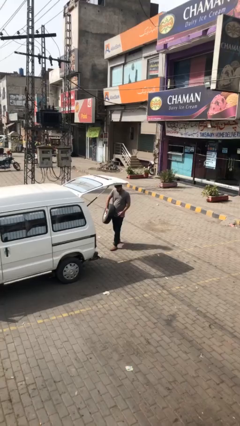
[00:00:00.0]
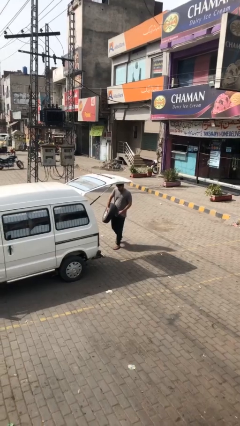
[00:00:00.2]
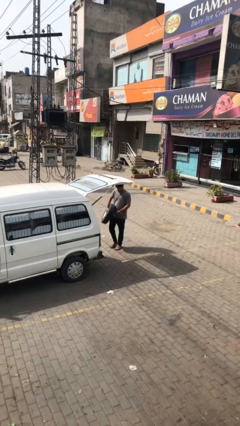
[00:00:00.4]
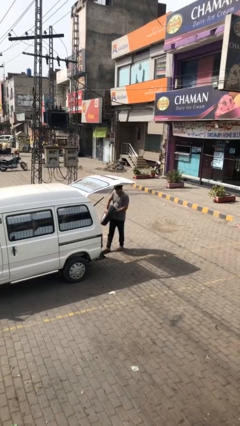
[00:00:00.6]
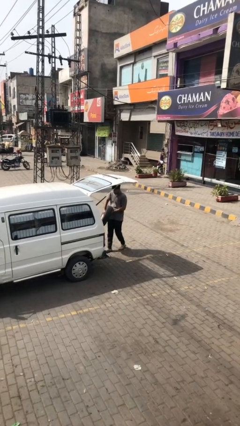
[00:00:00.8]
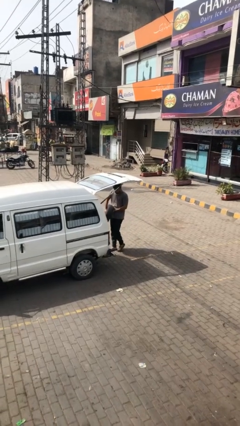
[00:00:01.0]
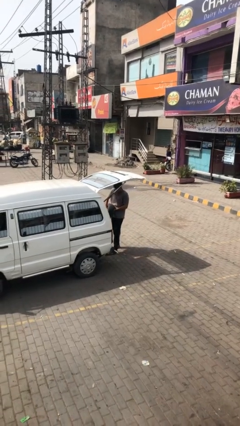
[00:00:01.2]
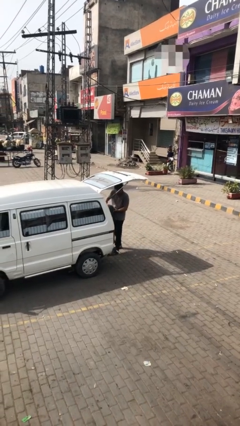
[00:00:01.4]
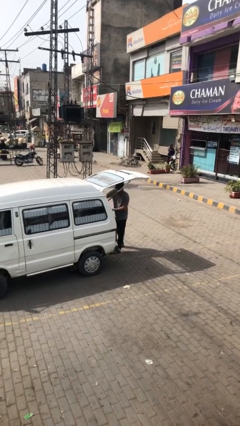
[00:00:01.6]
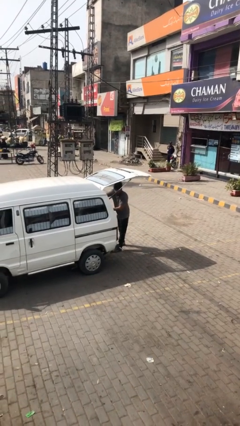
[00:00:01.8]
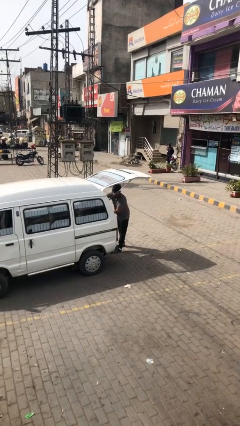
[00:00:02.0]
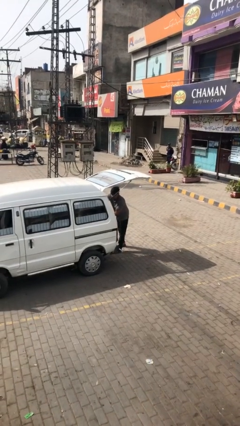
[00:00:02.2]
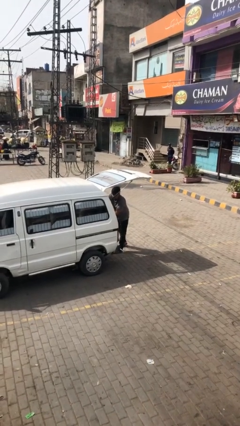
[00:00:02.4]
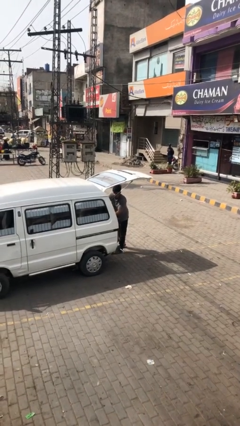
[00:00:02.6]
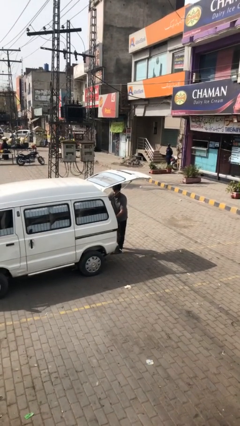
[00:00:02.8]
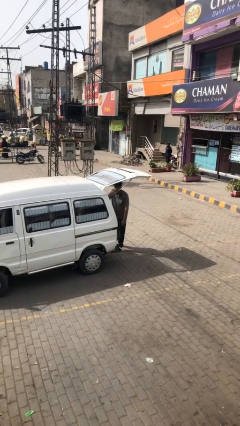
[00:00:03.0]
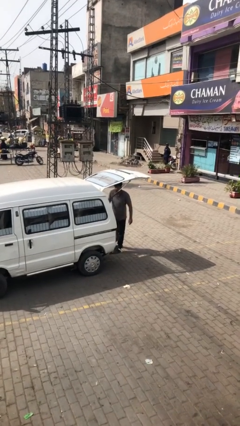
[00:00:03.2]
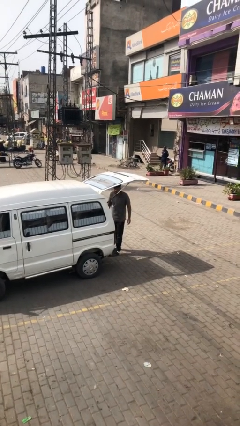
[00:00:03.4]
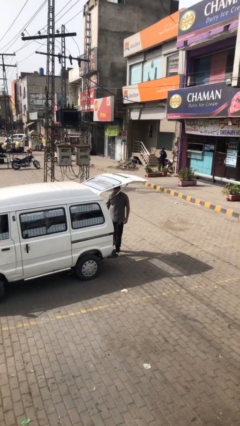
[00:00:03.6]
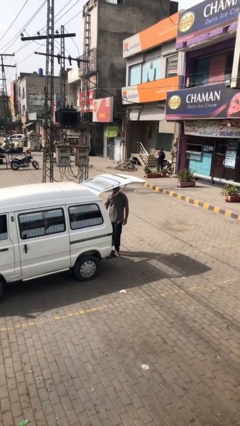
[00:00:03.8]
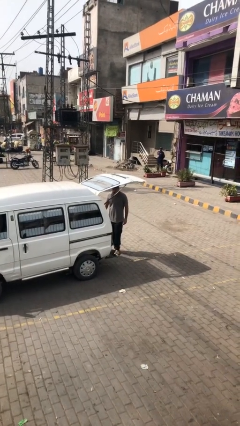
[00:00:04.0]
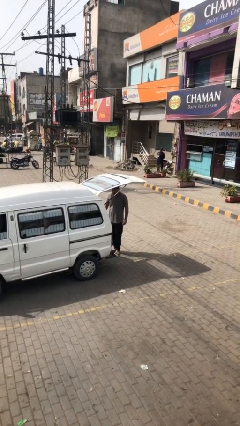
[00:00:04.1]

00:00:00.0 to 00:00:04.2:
person loads car

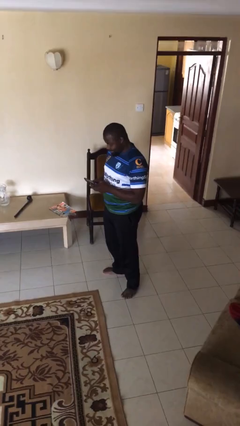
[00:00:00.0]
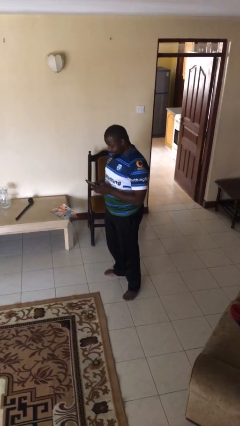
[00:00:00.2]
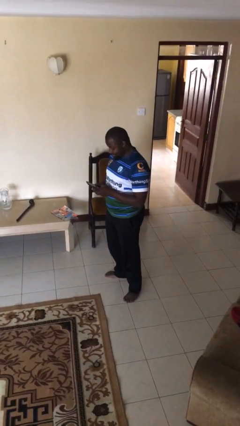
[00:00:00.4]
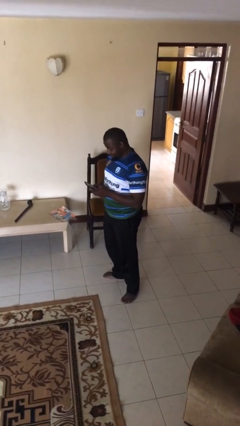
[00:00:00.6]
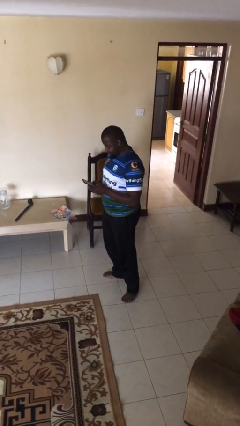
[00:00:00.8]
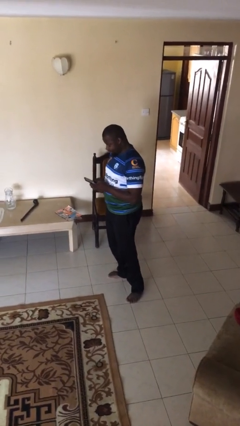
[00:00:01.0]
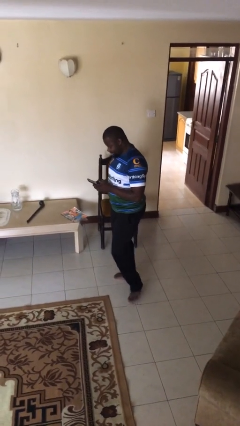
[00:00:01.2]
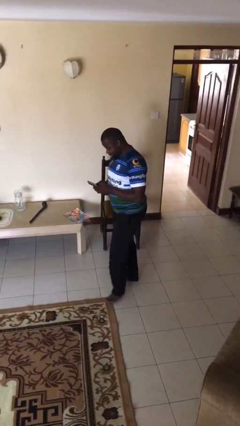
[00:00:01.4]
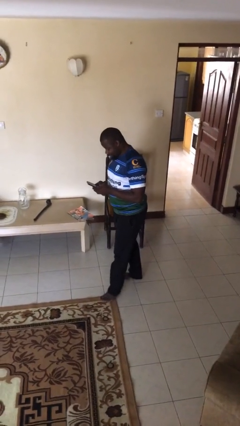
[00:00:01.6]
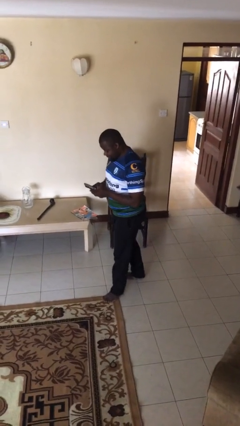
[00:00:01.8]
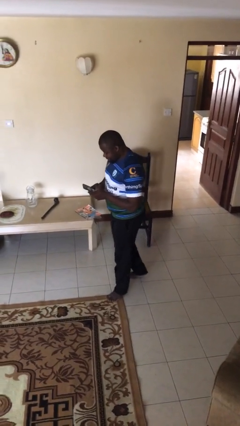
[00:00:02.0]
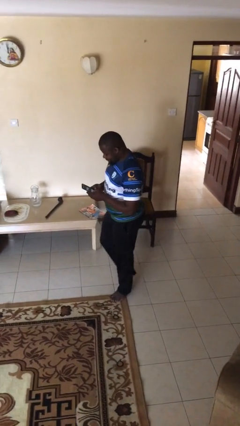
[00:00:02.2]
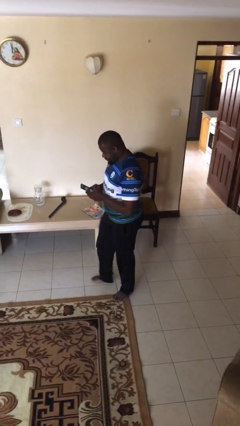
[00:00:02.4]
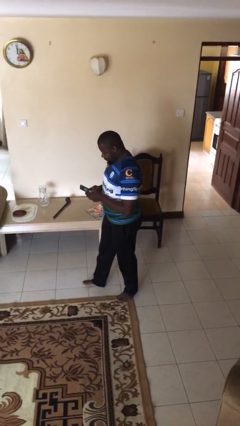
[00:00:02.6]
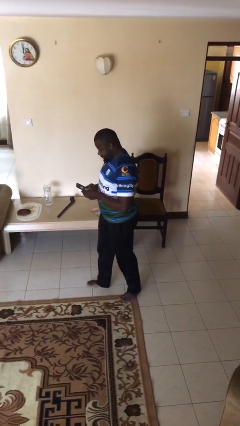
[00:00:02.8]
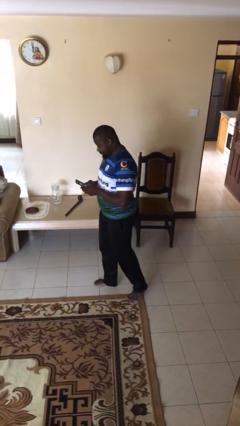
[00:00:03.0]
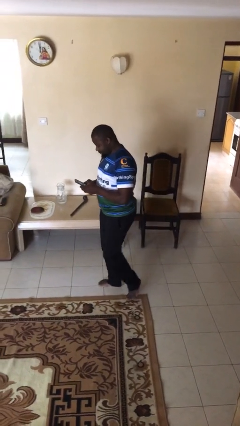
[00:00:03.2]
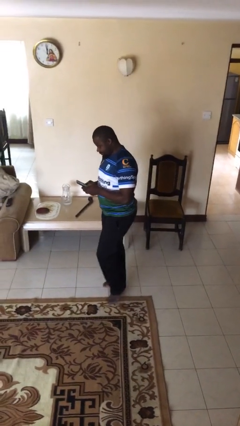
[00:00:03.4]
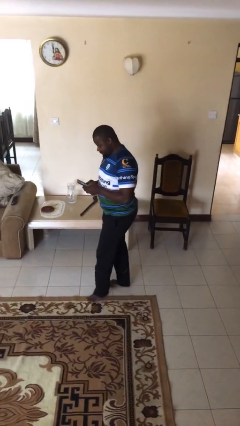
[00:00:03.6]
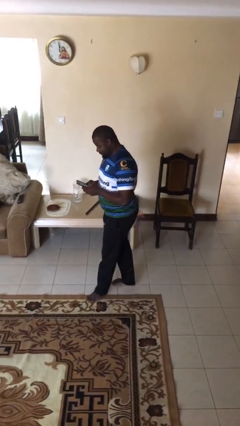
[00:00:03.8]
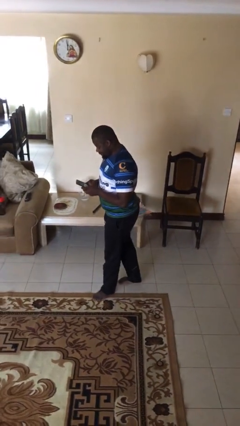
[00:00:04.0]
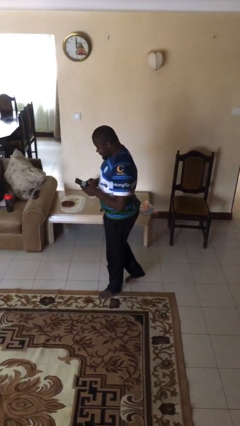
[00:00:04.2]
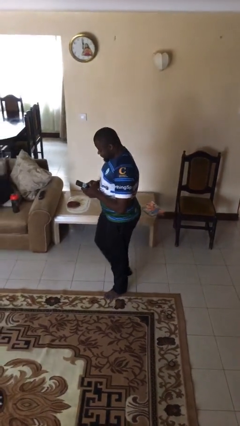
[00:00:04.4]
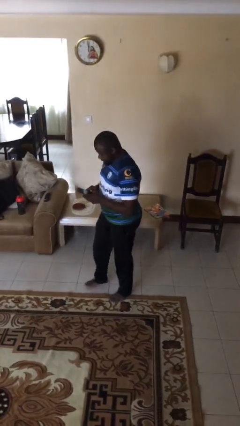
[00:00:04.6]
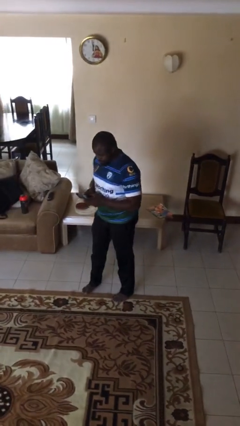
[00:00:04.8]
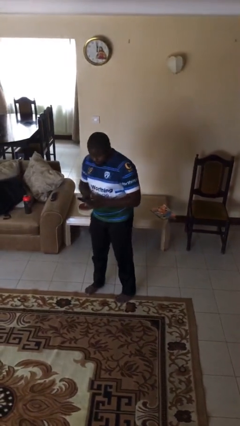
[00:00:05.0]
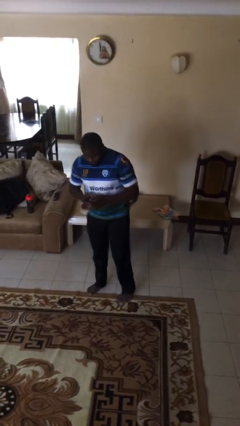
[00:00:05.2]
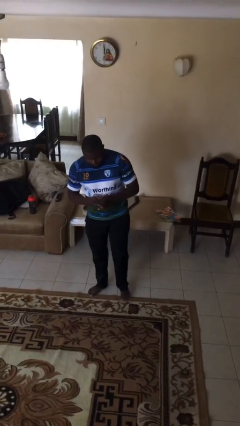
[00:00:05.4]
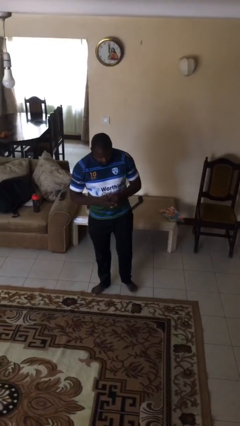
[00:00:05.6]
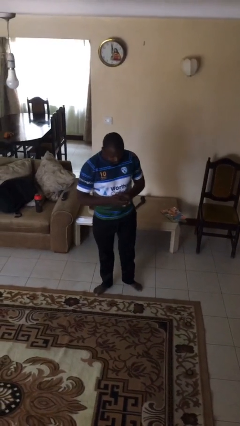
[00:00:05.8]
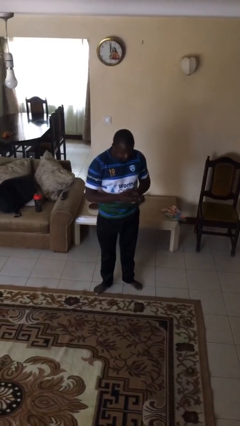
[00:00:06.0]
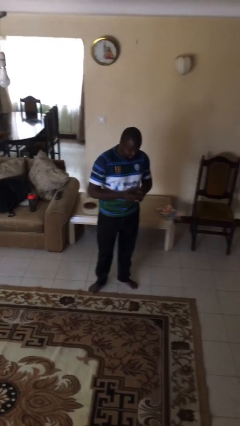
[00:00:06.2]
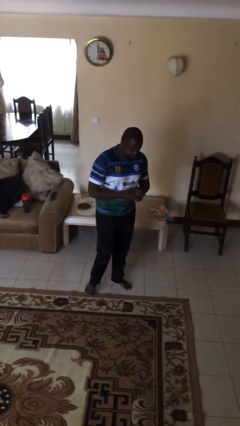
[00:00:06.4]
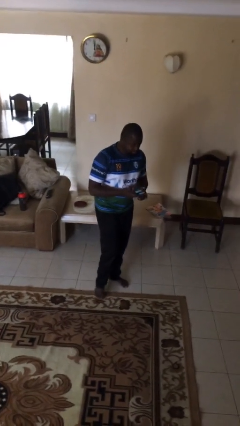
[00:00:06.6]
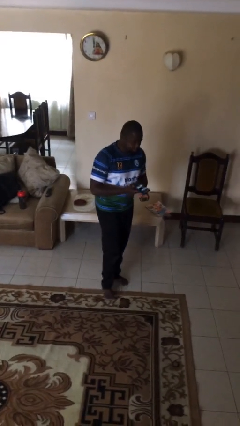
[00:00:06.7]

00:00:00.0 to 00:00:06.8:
person texts on phone

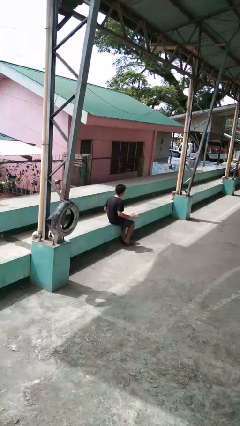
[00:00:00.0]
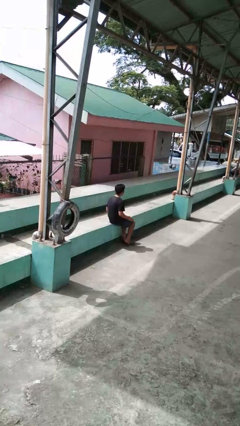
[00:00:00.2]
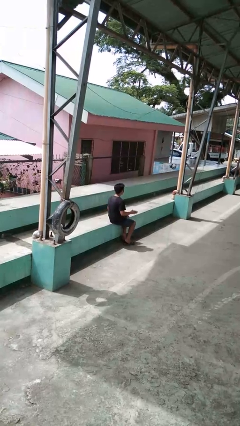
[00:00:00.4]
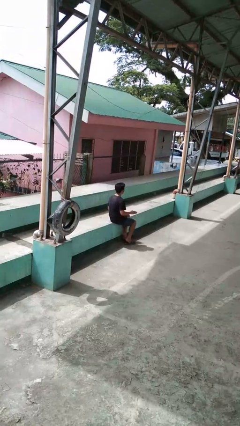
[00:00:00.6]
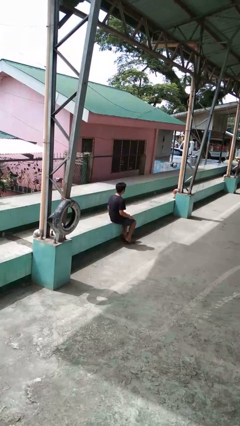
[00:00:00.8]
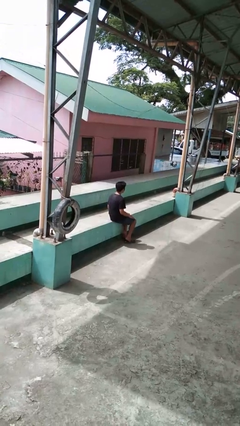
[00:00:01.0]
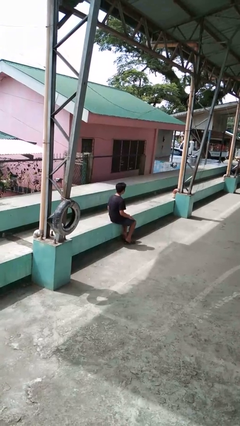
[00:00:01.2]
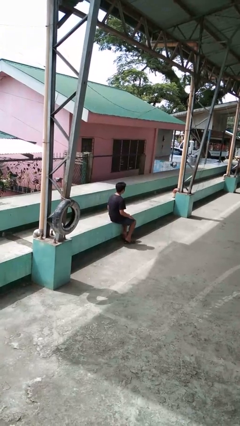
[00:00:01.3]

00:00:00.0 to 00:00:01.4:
person slaps hands on thighs

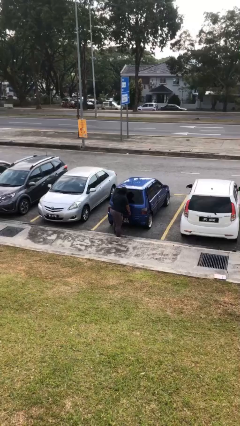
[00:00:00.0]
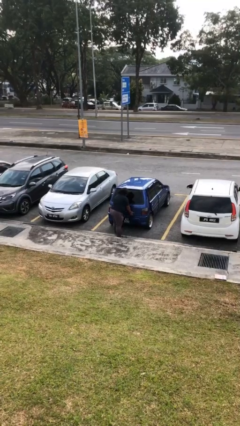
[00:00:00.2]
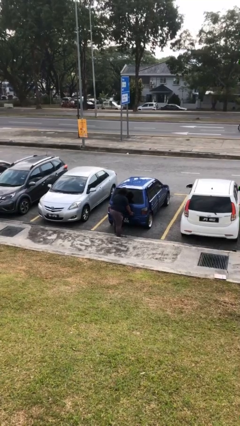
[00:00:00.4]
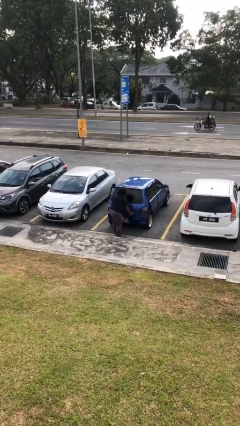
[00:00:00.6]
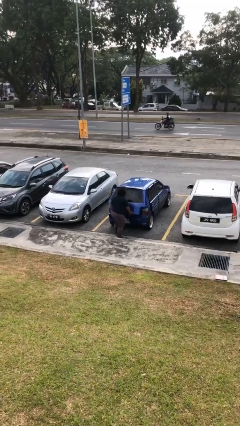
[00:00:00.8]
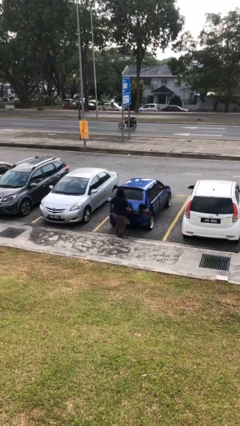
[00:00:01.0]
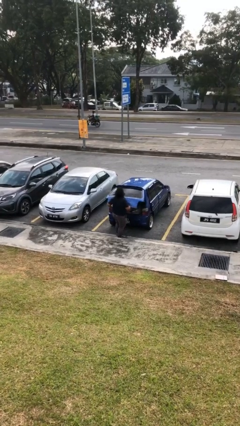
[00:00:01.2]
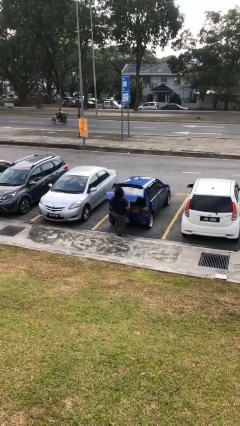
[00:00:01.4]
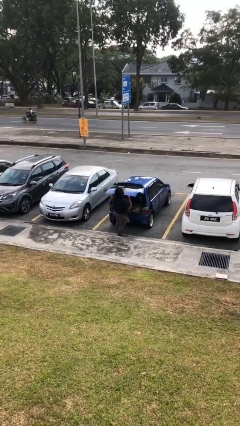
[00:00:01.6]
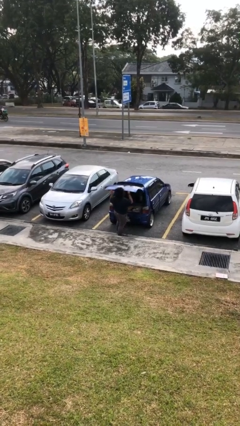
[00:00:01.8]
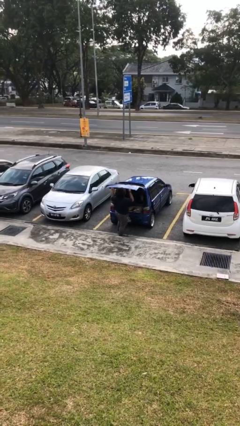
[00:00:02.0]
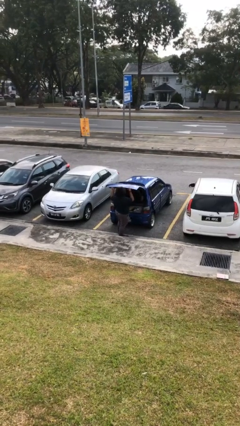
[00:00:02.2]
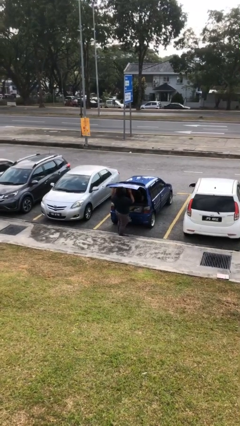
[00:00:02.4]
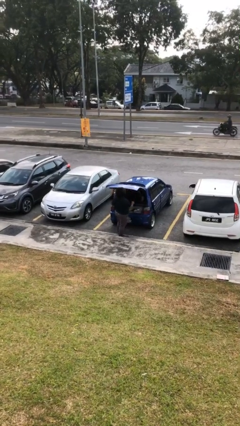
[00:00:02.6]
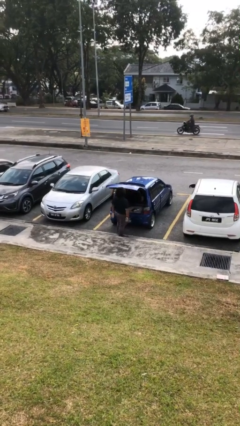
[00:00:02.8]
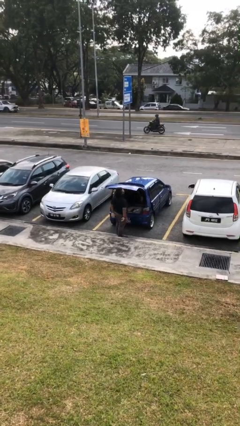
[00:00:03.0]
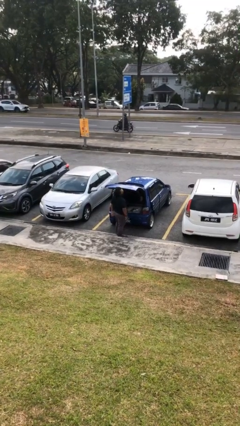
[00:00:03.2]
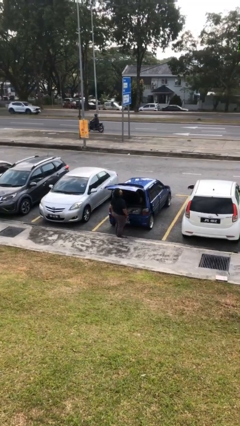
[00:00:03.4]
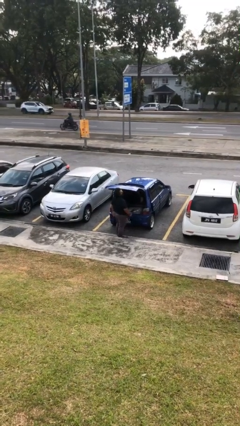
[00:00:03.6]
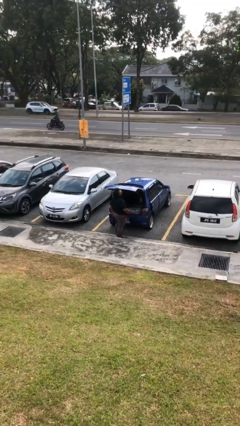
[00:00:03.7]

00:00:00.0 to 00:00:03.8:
person opens car trunk

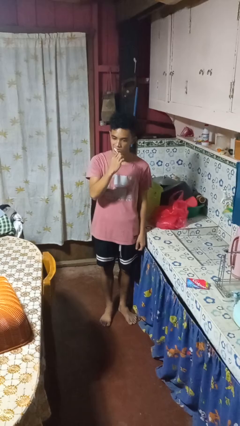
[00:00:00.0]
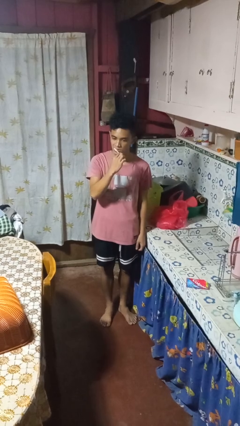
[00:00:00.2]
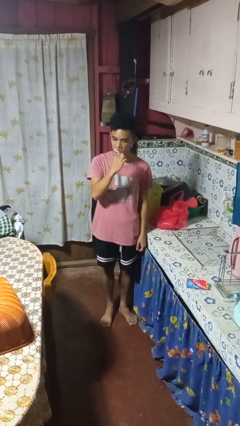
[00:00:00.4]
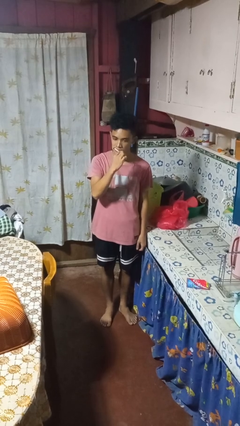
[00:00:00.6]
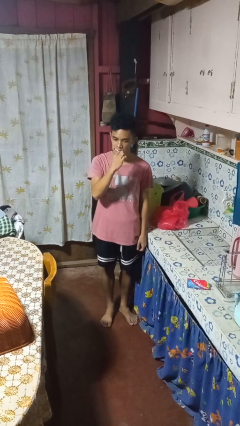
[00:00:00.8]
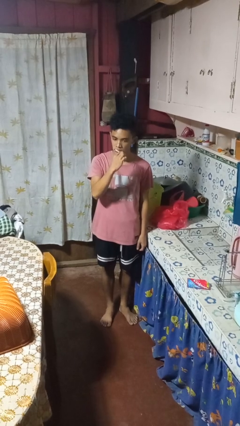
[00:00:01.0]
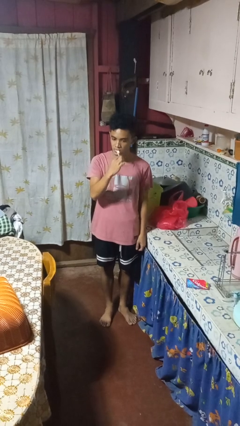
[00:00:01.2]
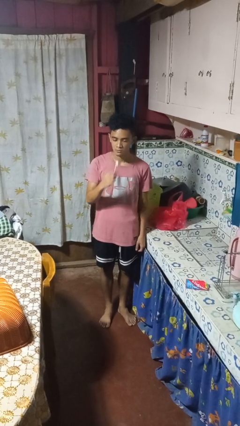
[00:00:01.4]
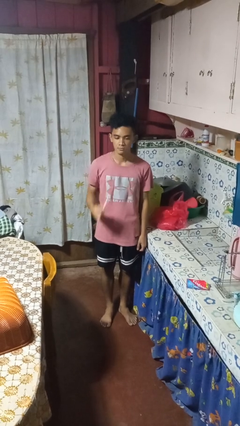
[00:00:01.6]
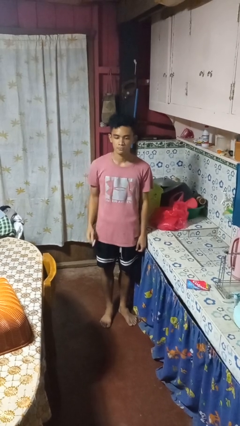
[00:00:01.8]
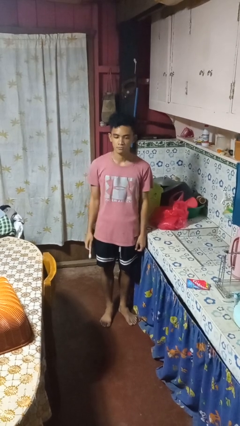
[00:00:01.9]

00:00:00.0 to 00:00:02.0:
person brushes teeth
